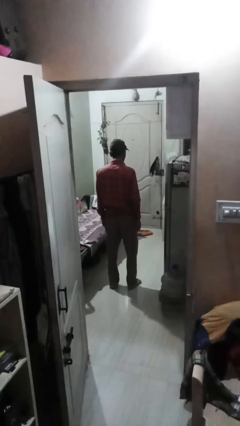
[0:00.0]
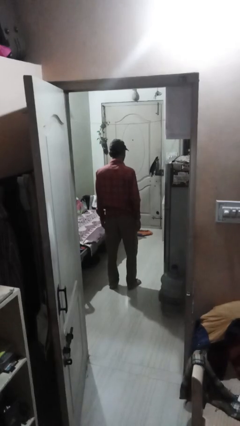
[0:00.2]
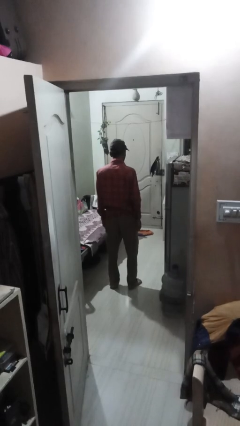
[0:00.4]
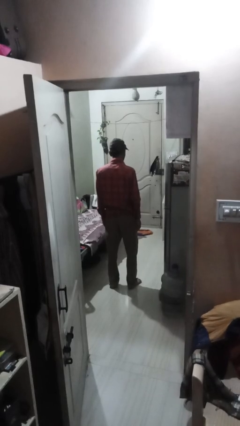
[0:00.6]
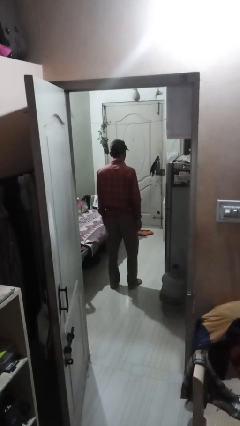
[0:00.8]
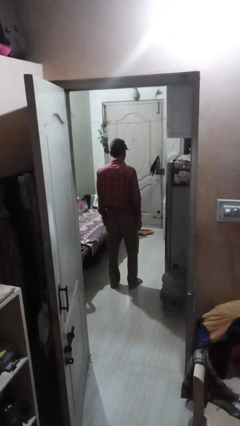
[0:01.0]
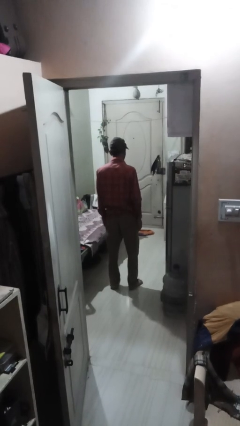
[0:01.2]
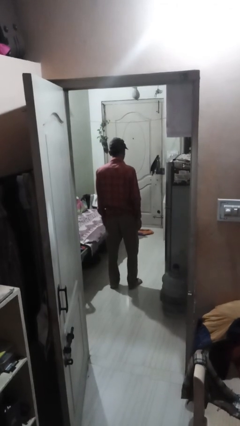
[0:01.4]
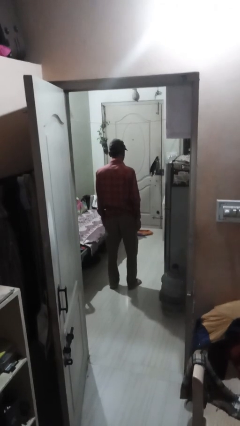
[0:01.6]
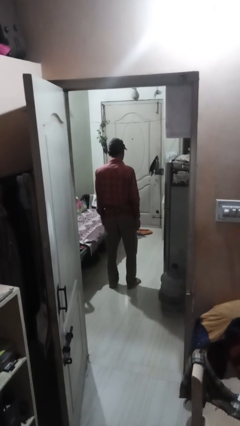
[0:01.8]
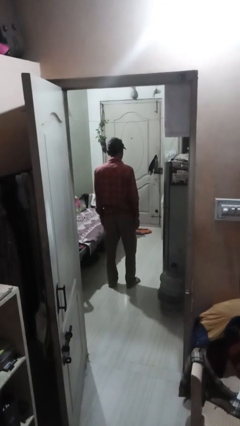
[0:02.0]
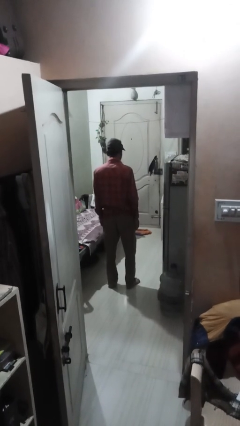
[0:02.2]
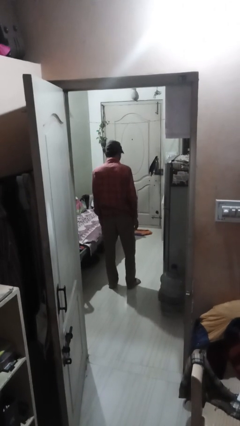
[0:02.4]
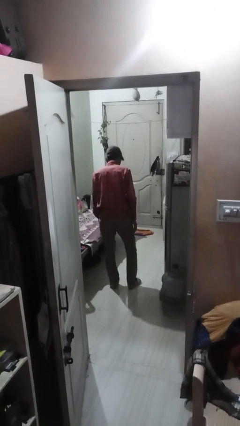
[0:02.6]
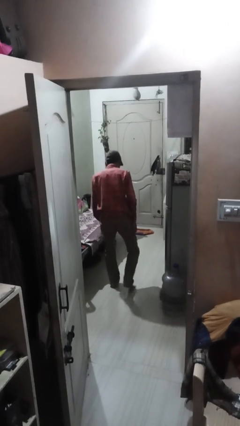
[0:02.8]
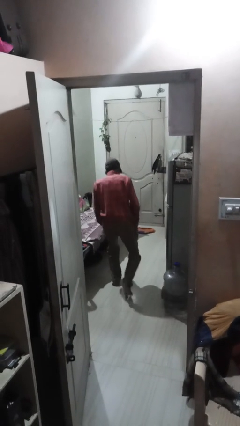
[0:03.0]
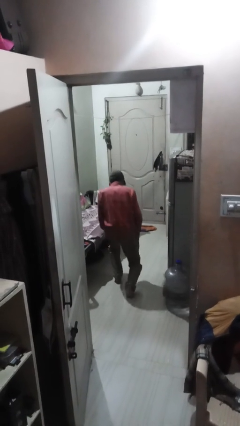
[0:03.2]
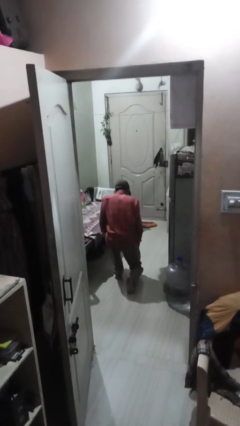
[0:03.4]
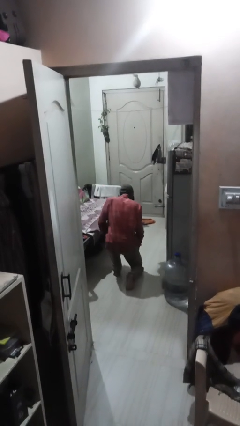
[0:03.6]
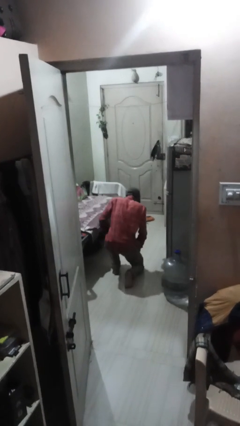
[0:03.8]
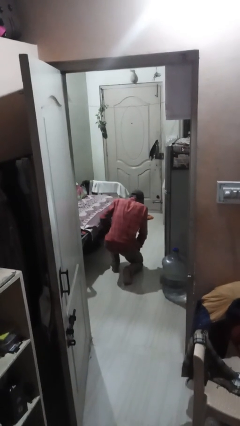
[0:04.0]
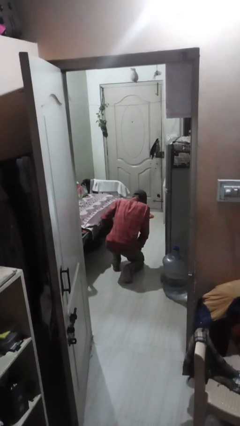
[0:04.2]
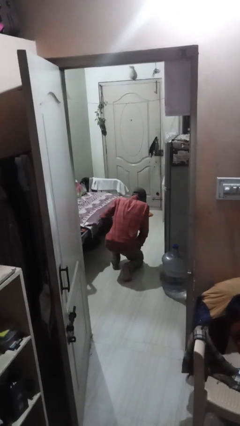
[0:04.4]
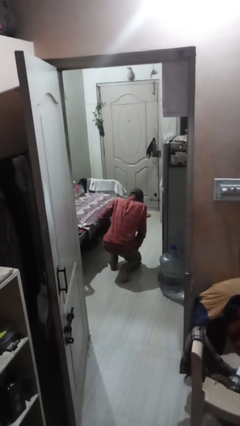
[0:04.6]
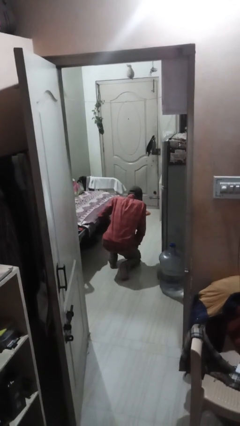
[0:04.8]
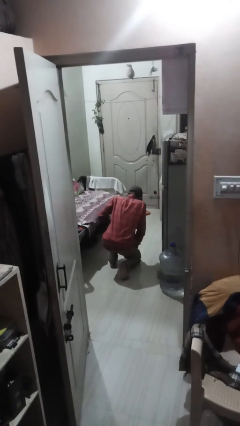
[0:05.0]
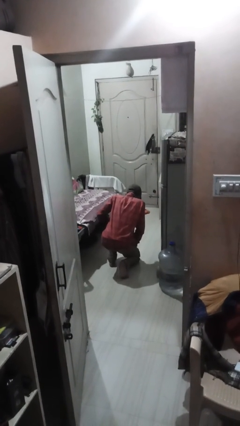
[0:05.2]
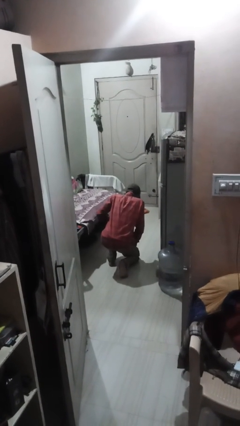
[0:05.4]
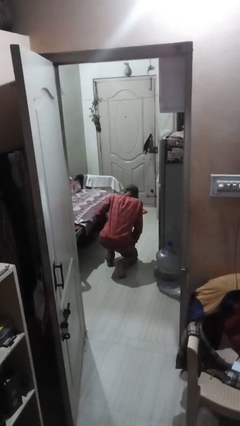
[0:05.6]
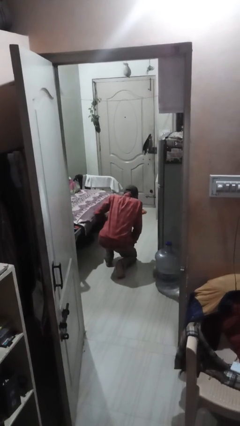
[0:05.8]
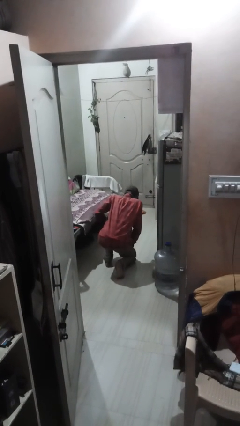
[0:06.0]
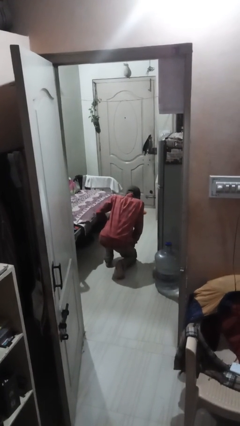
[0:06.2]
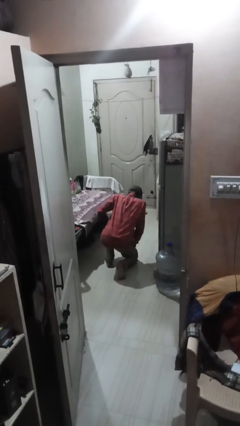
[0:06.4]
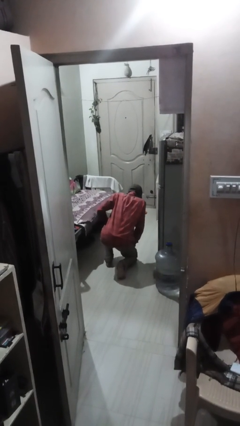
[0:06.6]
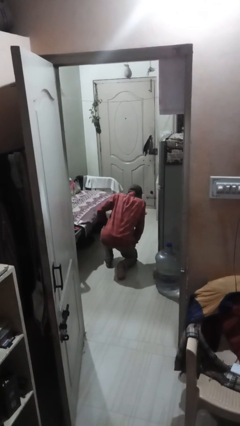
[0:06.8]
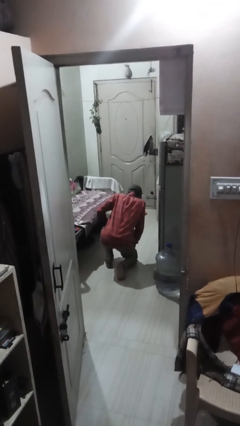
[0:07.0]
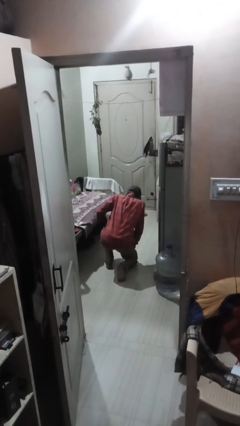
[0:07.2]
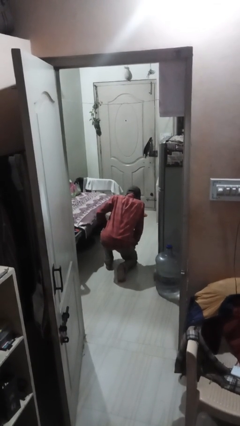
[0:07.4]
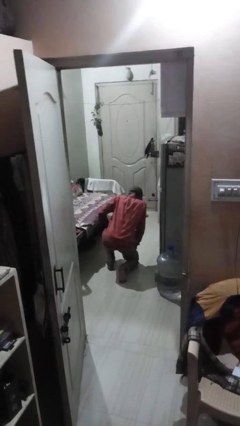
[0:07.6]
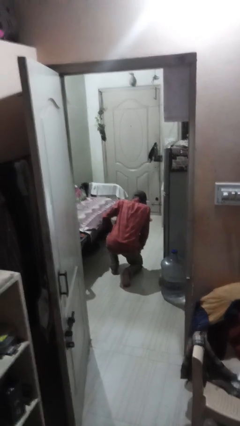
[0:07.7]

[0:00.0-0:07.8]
person kneels

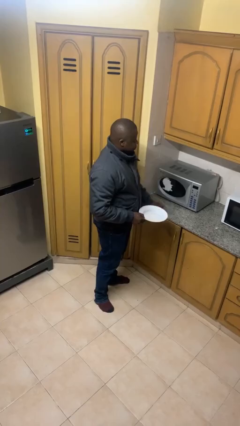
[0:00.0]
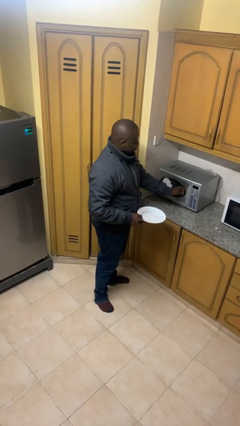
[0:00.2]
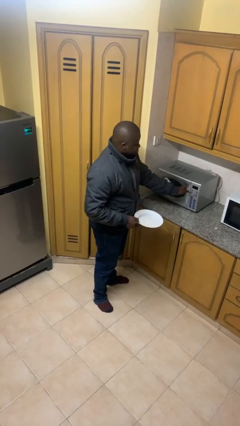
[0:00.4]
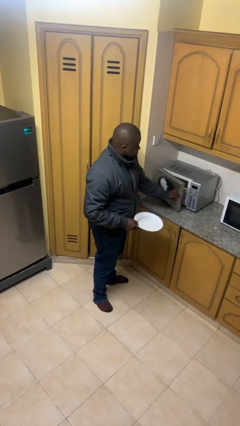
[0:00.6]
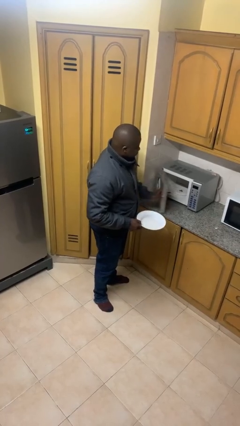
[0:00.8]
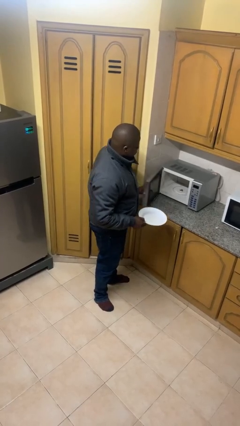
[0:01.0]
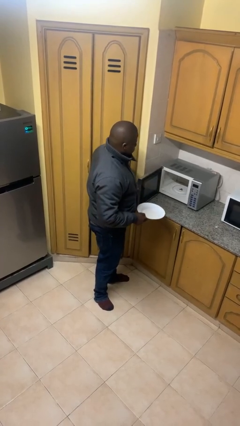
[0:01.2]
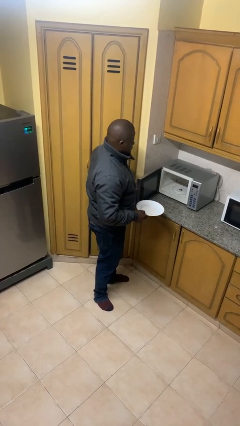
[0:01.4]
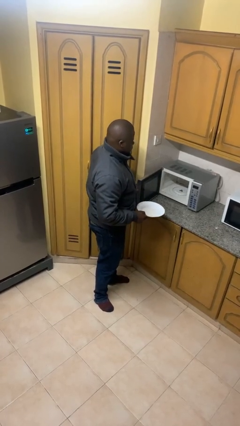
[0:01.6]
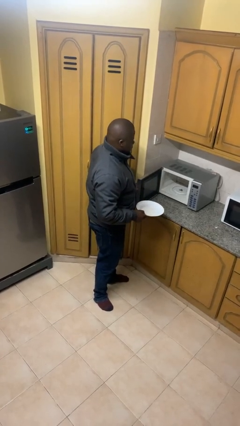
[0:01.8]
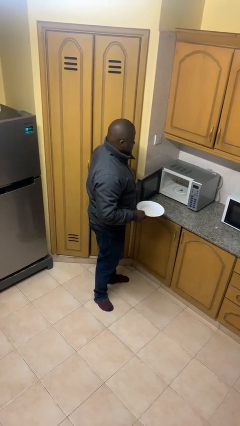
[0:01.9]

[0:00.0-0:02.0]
person opens microwave

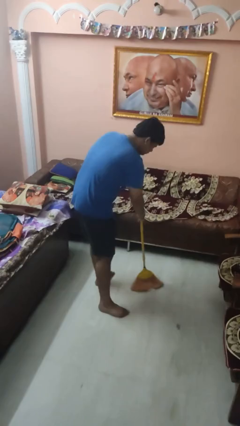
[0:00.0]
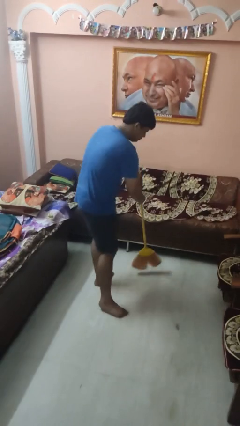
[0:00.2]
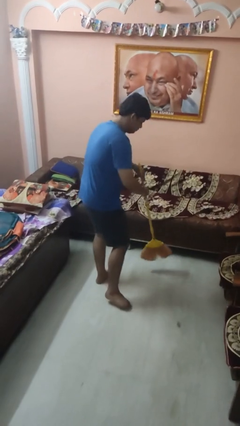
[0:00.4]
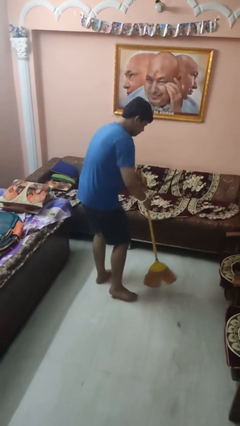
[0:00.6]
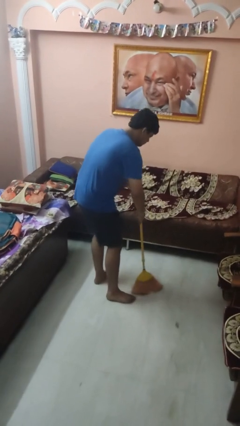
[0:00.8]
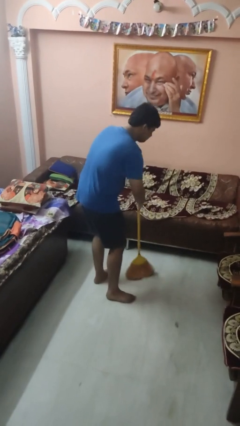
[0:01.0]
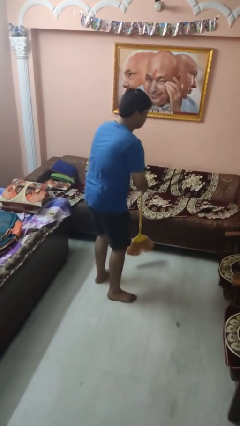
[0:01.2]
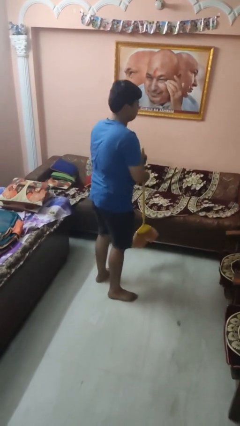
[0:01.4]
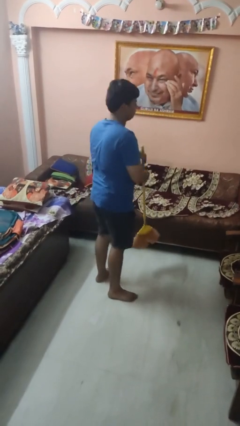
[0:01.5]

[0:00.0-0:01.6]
person sweeps floor

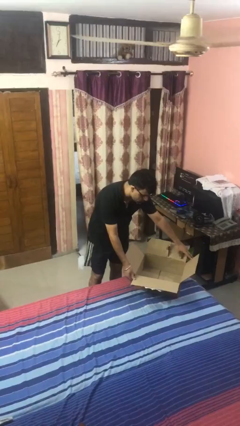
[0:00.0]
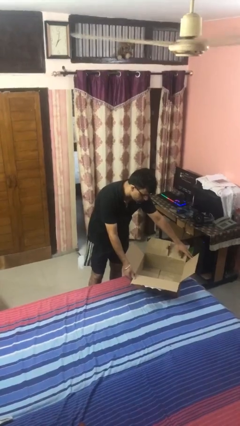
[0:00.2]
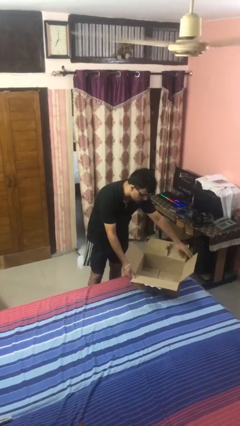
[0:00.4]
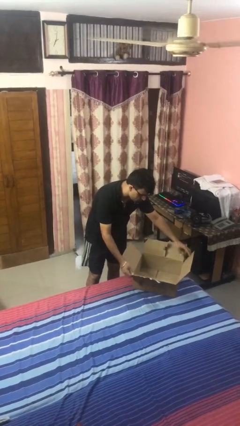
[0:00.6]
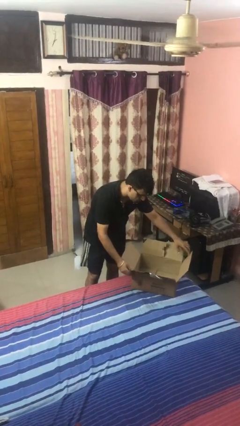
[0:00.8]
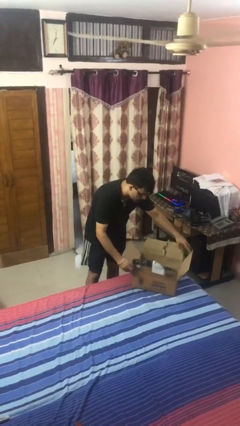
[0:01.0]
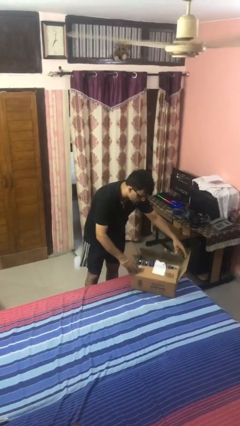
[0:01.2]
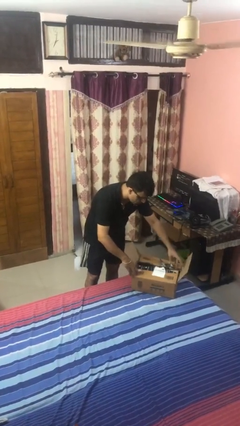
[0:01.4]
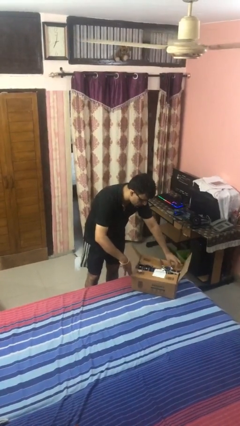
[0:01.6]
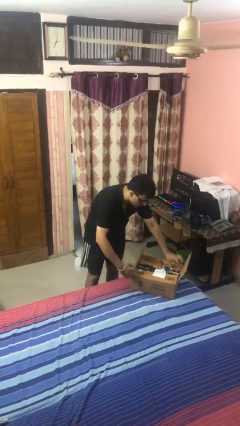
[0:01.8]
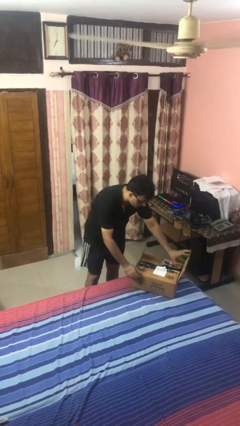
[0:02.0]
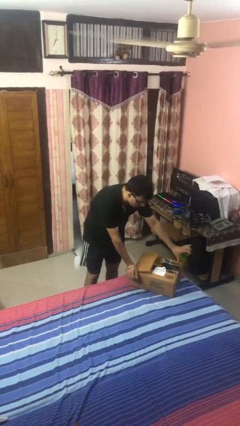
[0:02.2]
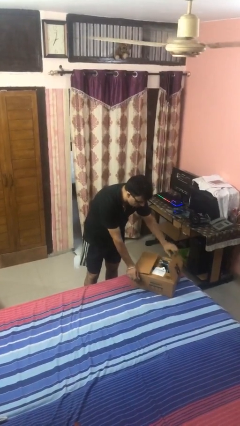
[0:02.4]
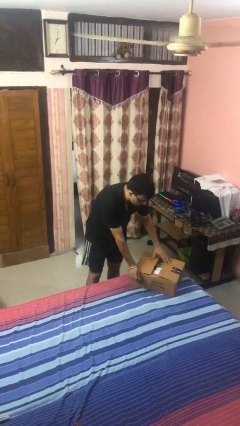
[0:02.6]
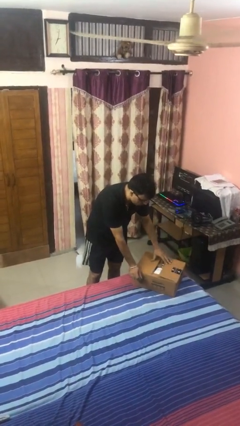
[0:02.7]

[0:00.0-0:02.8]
person closes box

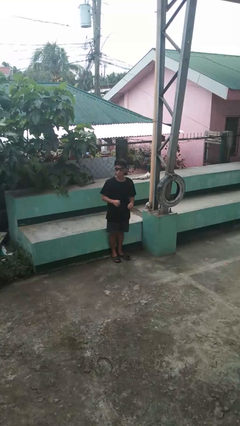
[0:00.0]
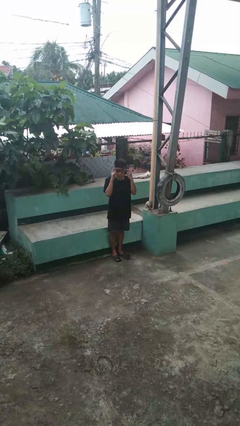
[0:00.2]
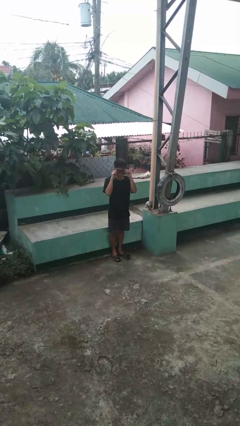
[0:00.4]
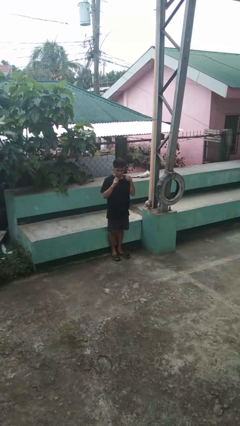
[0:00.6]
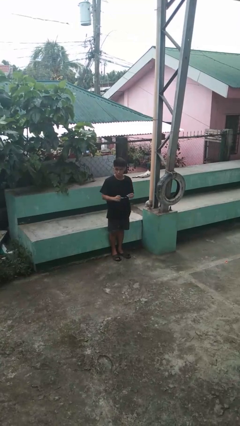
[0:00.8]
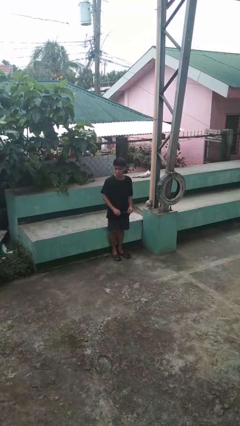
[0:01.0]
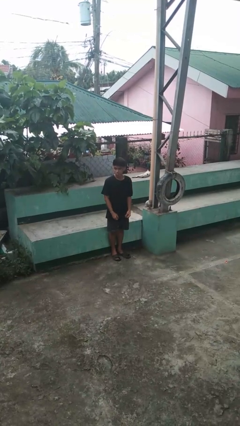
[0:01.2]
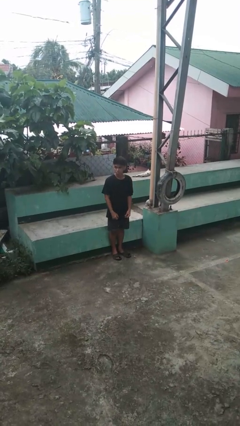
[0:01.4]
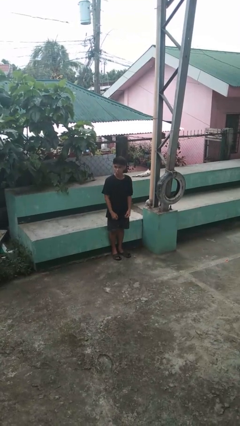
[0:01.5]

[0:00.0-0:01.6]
person takes off sunglasses

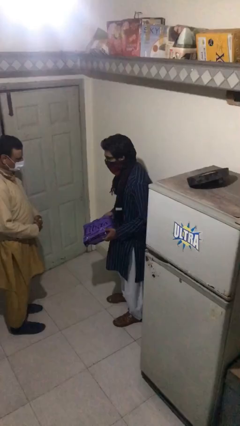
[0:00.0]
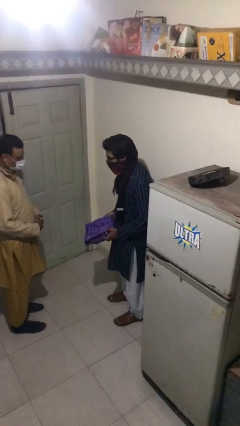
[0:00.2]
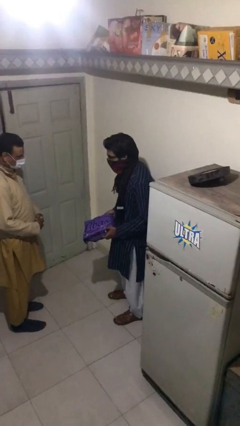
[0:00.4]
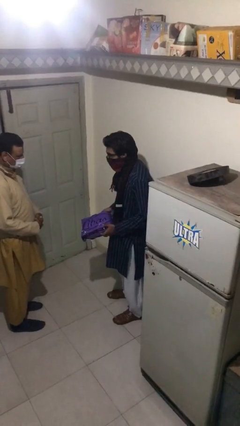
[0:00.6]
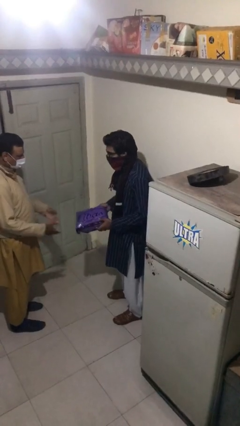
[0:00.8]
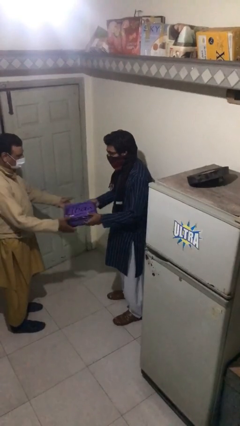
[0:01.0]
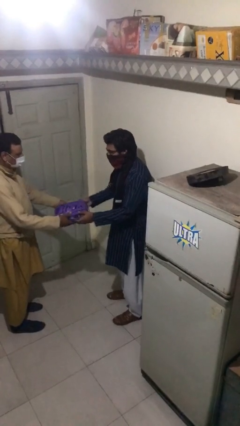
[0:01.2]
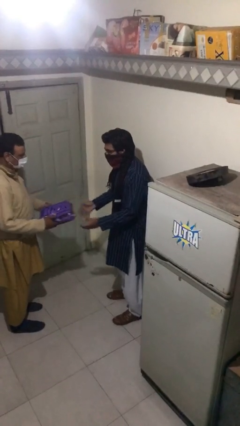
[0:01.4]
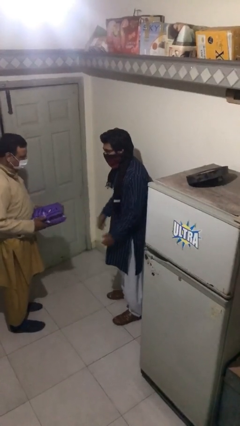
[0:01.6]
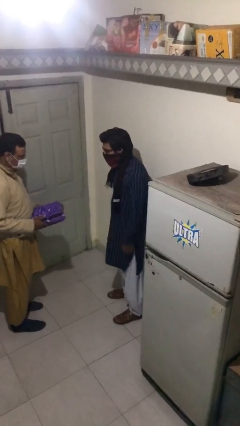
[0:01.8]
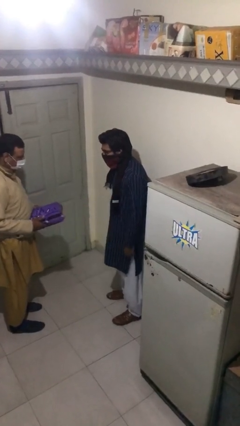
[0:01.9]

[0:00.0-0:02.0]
person transfers object to person
